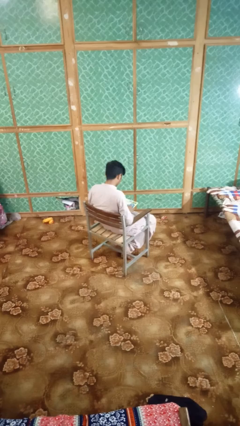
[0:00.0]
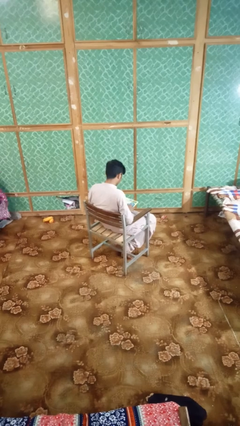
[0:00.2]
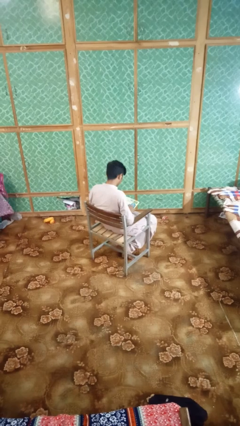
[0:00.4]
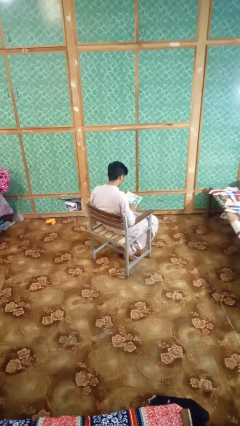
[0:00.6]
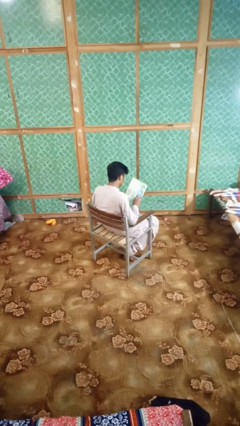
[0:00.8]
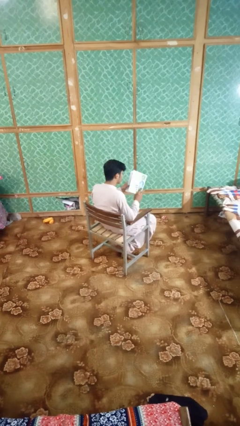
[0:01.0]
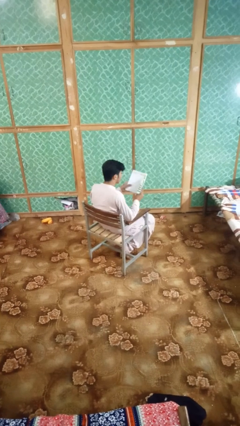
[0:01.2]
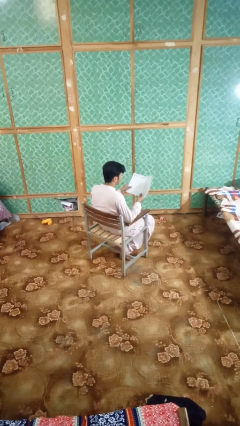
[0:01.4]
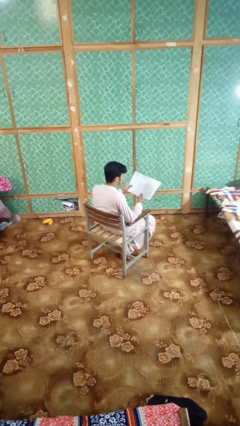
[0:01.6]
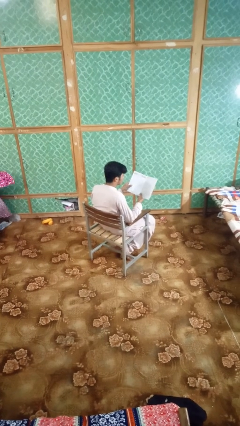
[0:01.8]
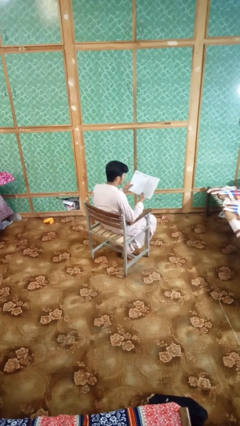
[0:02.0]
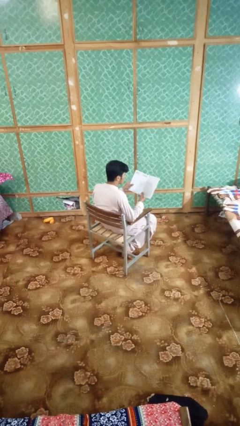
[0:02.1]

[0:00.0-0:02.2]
person reads magazine

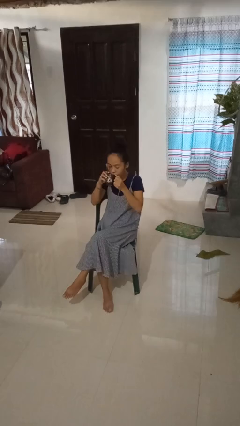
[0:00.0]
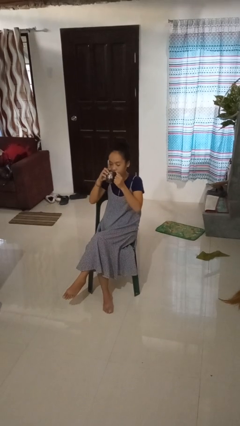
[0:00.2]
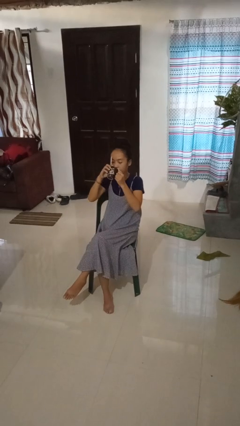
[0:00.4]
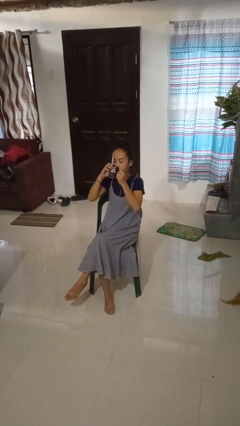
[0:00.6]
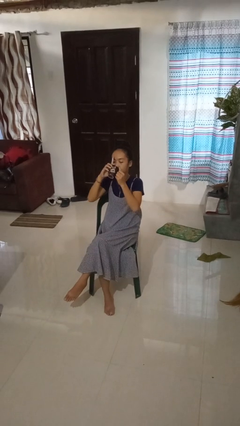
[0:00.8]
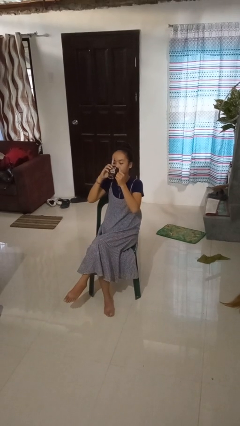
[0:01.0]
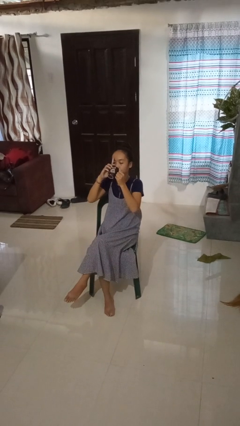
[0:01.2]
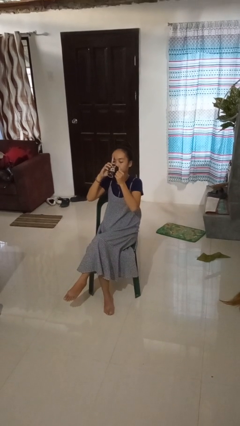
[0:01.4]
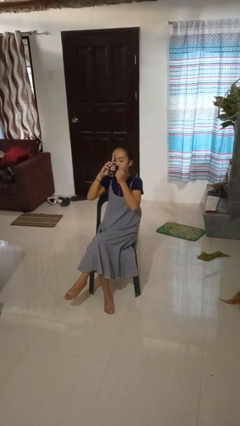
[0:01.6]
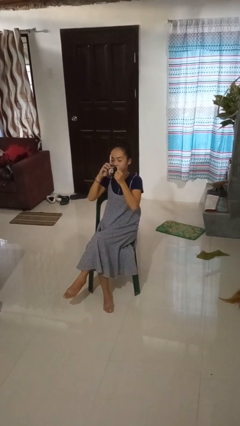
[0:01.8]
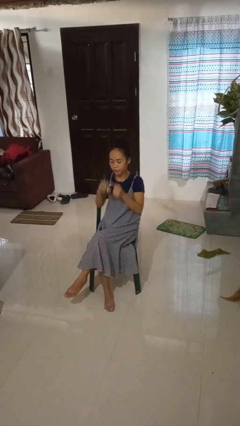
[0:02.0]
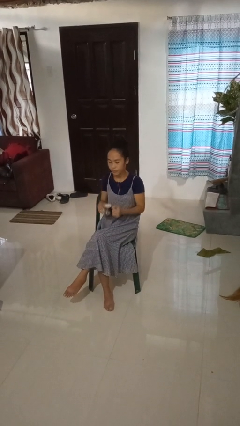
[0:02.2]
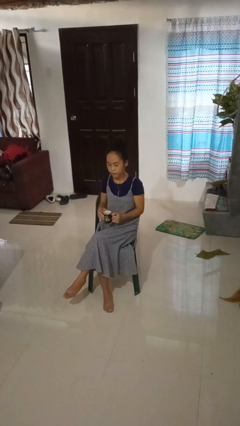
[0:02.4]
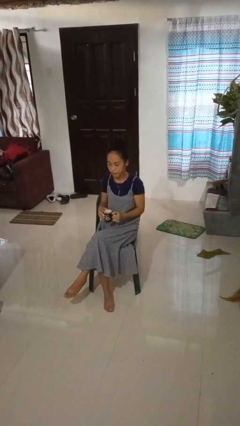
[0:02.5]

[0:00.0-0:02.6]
person drinks from mug

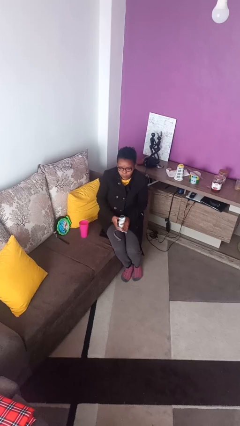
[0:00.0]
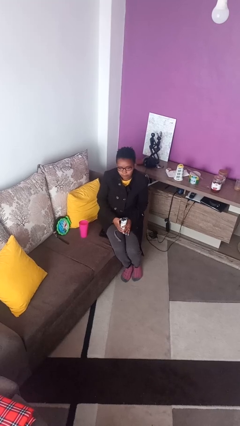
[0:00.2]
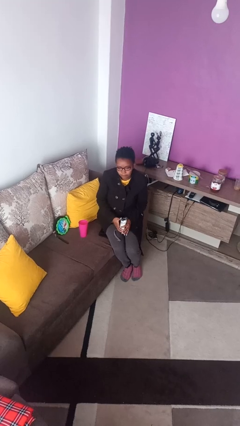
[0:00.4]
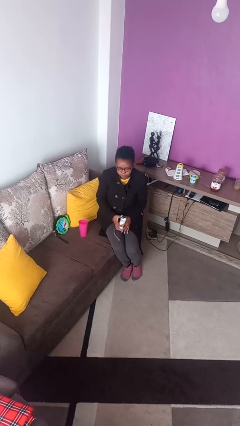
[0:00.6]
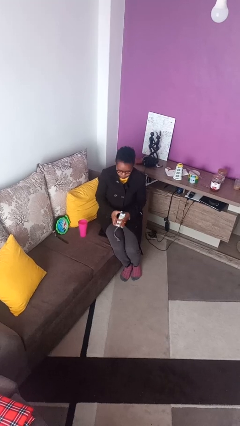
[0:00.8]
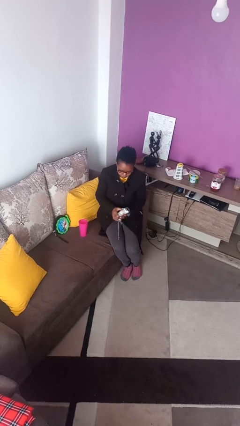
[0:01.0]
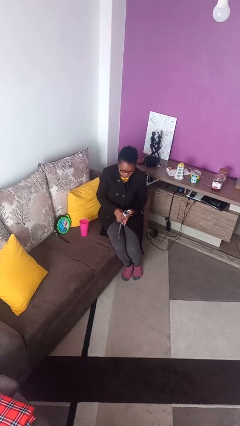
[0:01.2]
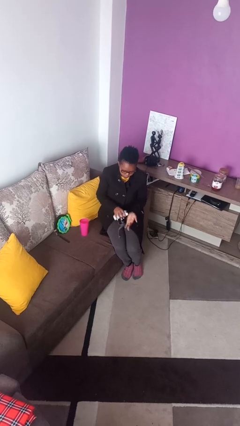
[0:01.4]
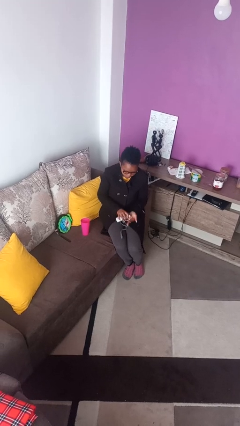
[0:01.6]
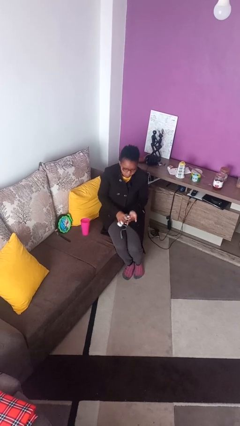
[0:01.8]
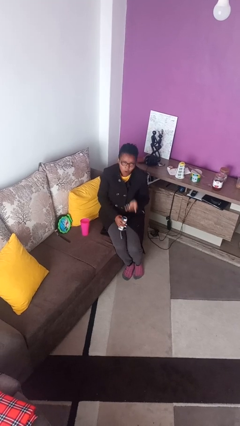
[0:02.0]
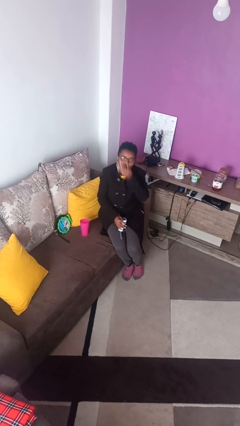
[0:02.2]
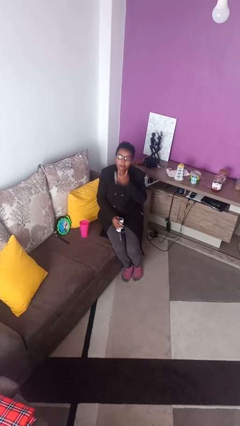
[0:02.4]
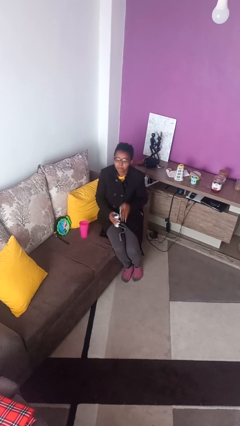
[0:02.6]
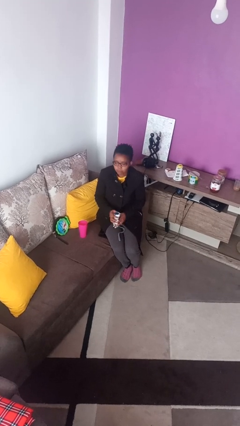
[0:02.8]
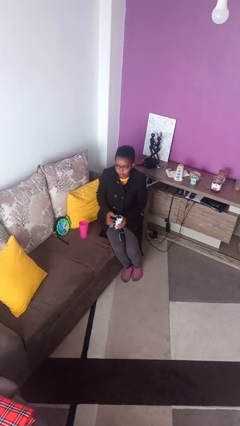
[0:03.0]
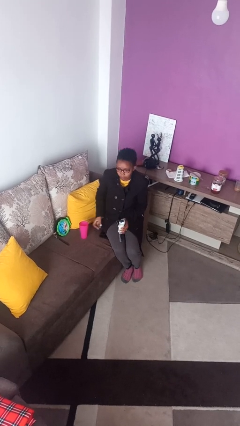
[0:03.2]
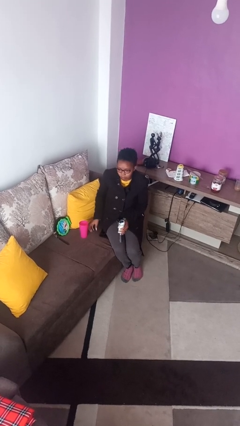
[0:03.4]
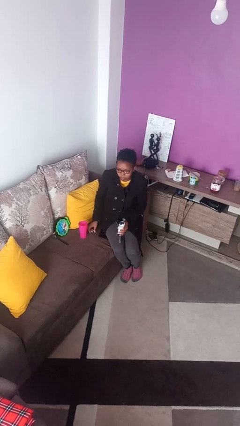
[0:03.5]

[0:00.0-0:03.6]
person takes medicine pills

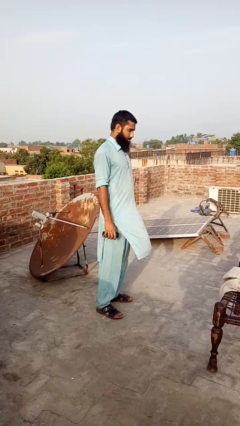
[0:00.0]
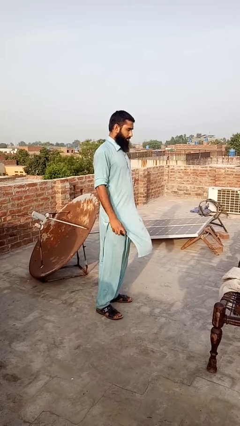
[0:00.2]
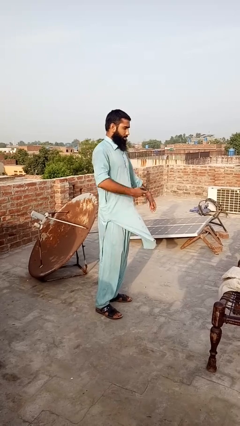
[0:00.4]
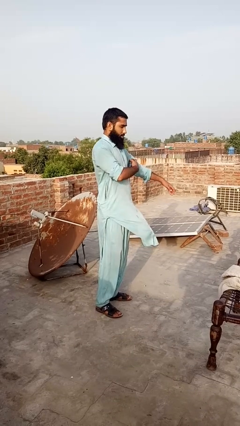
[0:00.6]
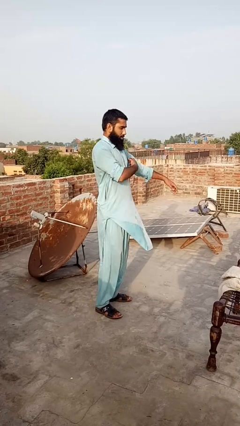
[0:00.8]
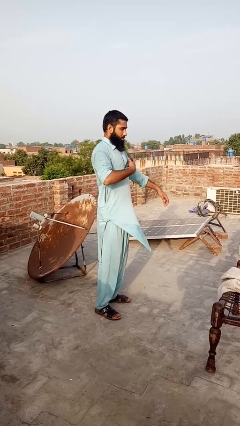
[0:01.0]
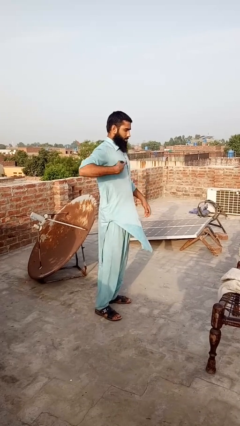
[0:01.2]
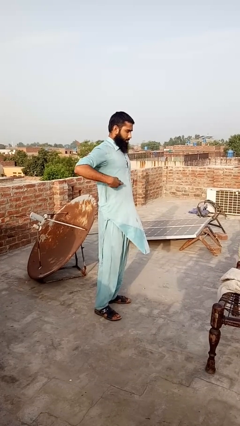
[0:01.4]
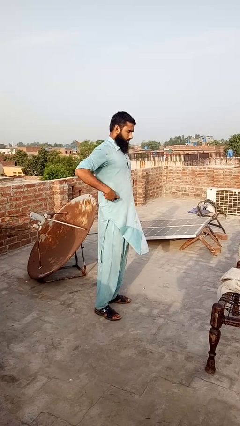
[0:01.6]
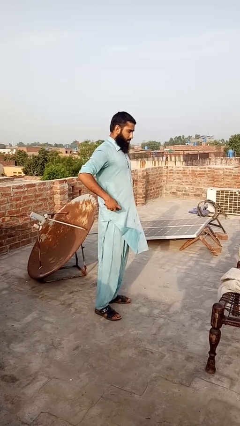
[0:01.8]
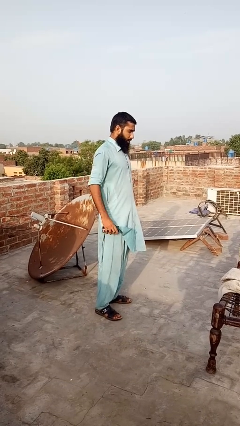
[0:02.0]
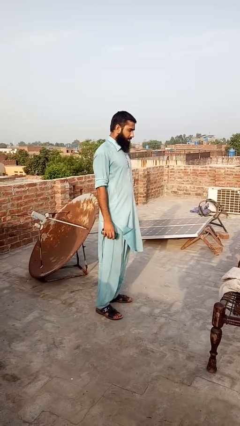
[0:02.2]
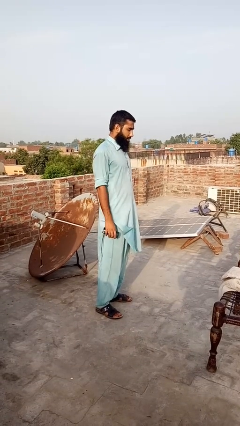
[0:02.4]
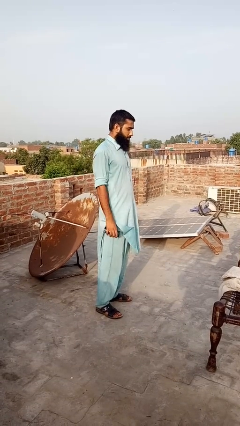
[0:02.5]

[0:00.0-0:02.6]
person applies deodorant

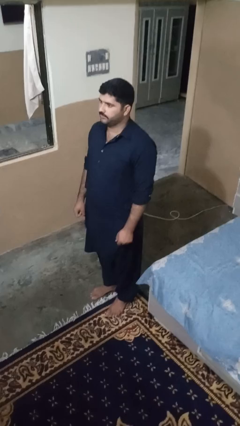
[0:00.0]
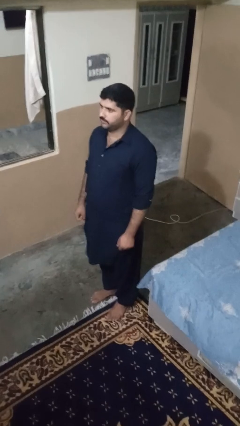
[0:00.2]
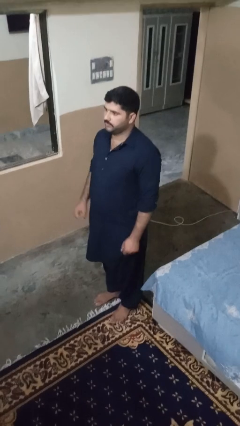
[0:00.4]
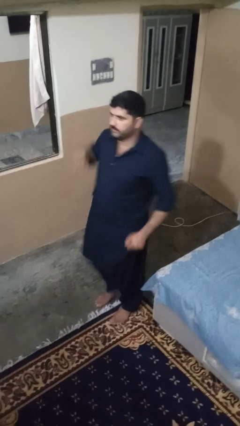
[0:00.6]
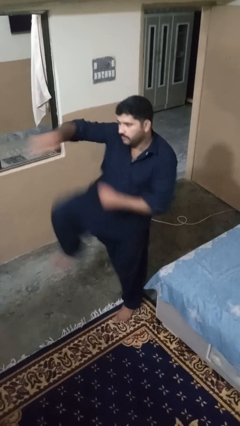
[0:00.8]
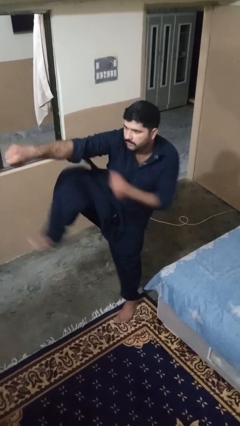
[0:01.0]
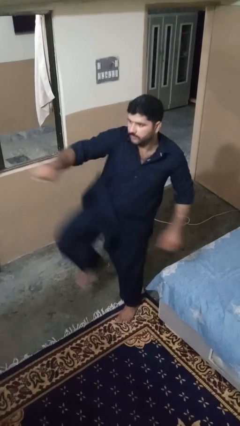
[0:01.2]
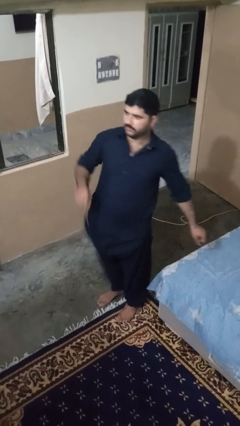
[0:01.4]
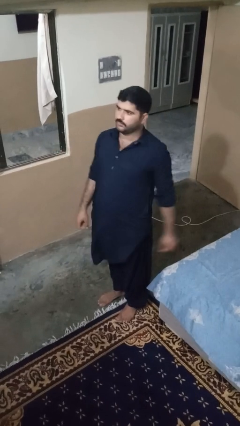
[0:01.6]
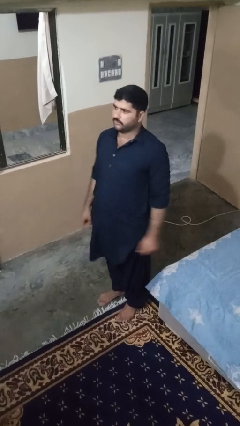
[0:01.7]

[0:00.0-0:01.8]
person karate chop

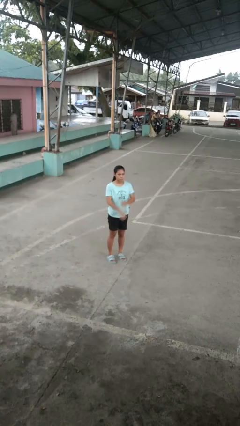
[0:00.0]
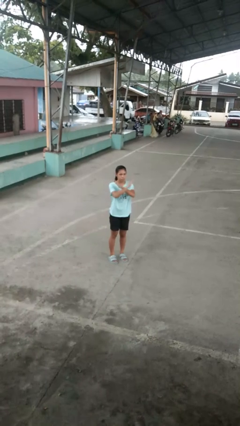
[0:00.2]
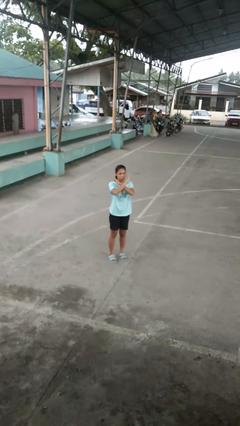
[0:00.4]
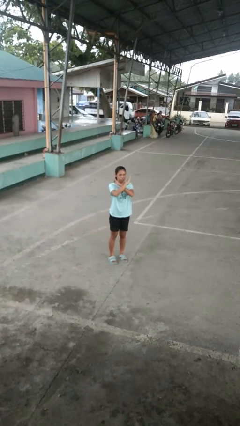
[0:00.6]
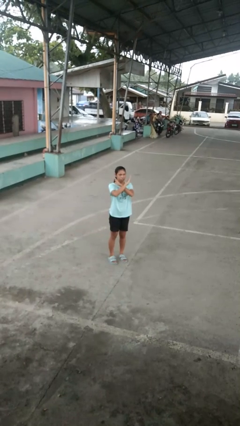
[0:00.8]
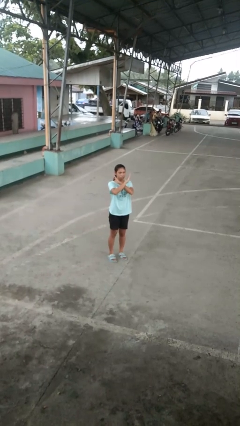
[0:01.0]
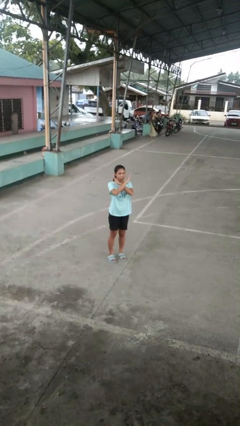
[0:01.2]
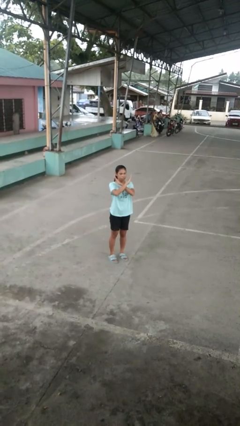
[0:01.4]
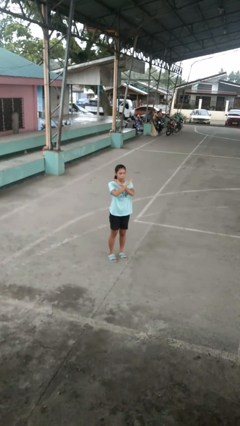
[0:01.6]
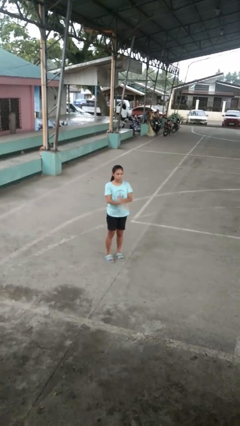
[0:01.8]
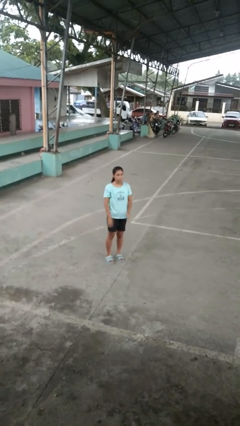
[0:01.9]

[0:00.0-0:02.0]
person gestures arms x

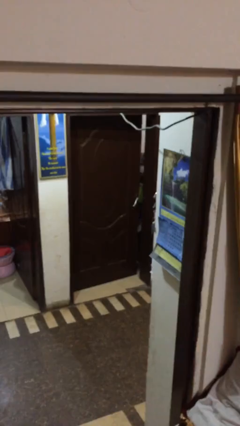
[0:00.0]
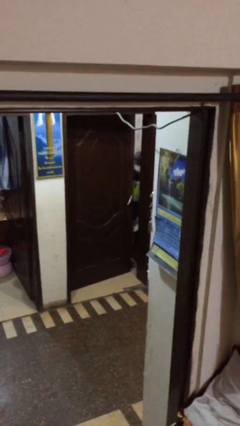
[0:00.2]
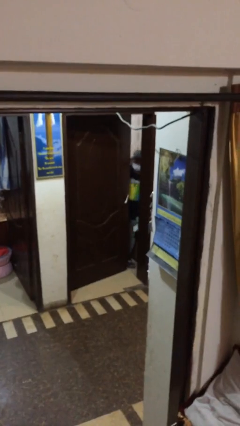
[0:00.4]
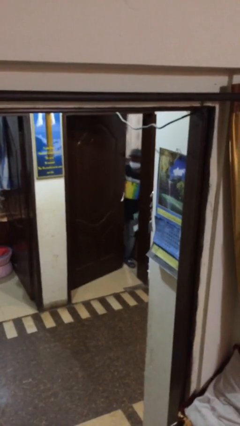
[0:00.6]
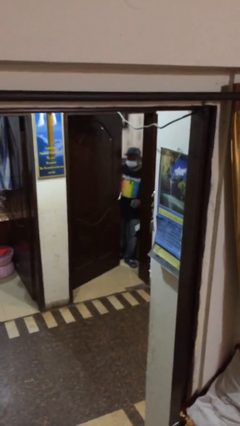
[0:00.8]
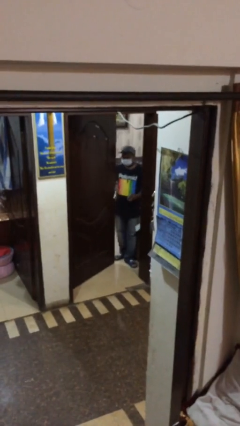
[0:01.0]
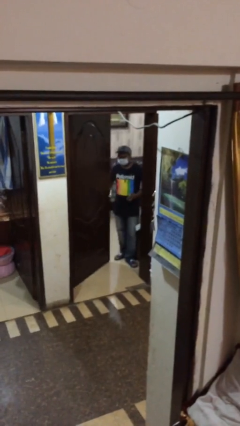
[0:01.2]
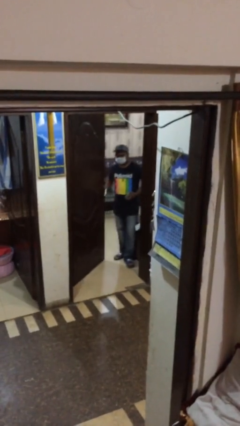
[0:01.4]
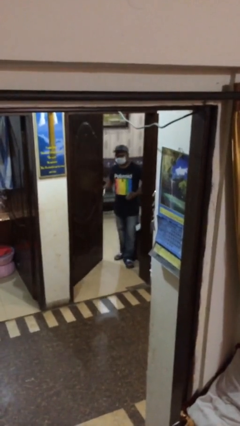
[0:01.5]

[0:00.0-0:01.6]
person opens facility door

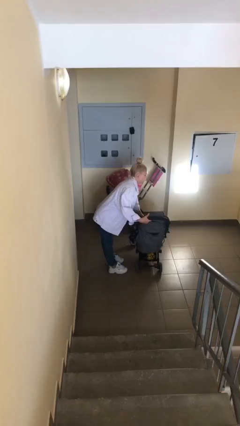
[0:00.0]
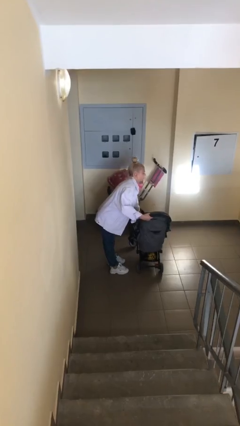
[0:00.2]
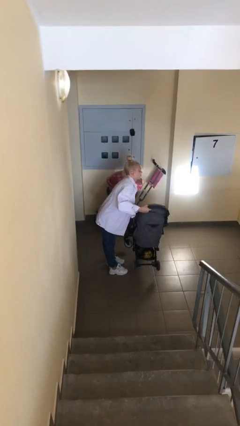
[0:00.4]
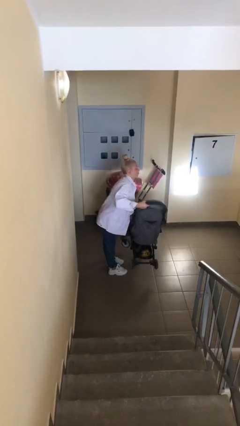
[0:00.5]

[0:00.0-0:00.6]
person picks up object from floor

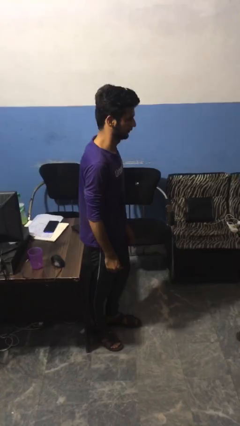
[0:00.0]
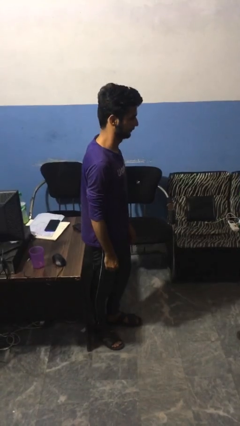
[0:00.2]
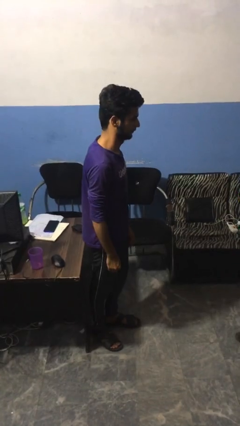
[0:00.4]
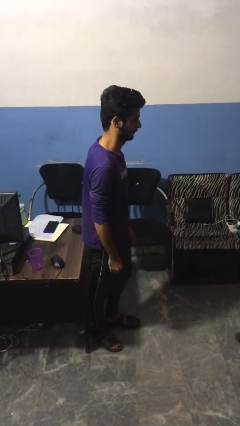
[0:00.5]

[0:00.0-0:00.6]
person bumps into person
